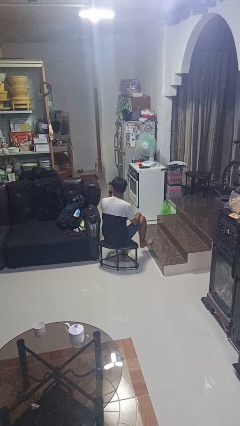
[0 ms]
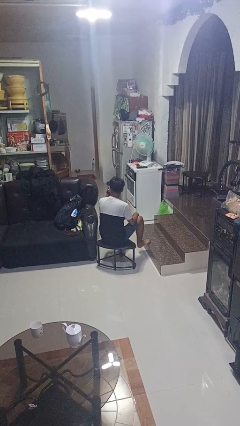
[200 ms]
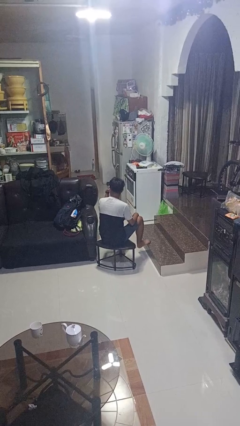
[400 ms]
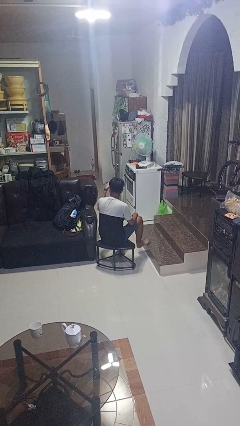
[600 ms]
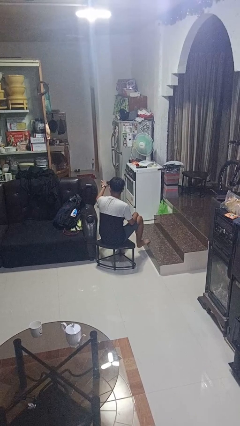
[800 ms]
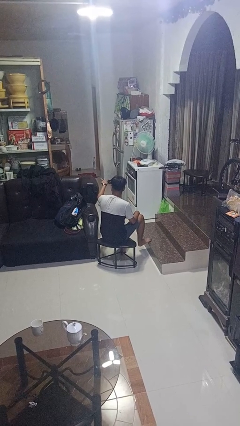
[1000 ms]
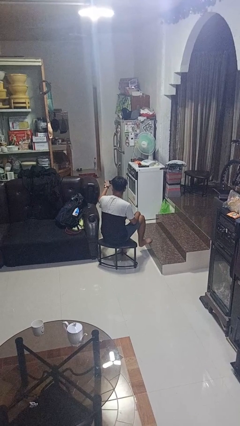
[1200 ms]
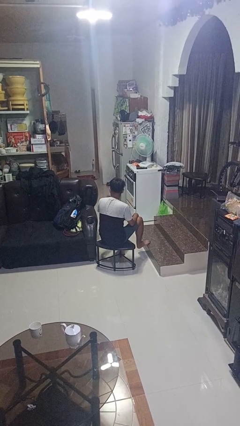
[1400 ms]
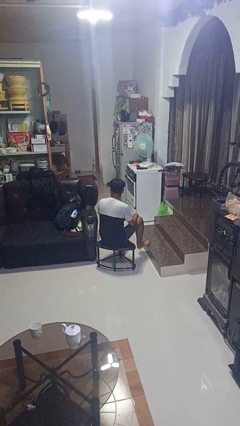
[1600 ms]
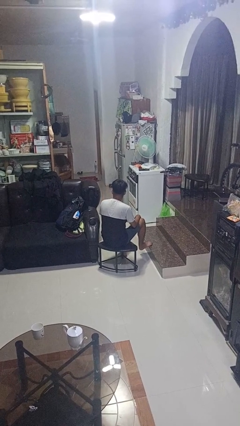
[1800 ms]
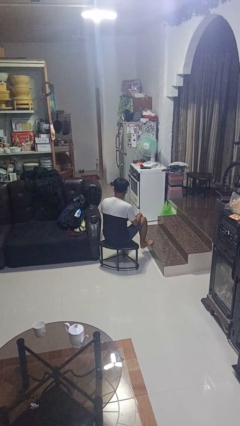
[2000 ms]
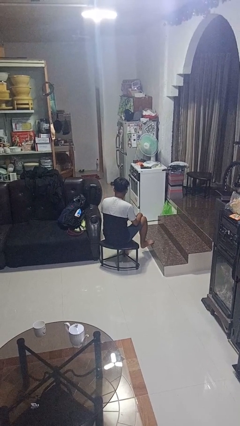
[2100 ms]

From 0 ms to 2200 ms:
person gestures watch closely

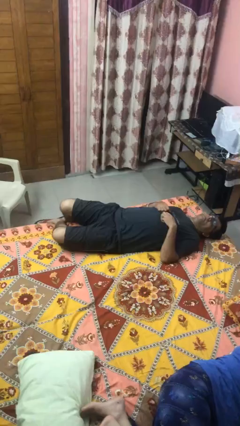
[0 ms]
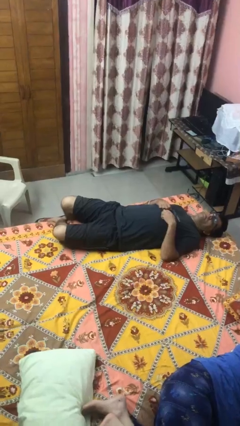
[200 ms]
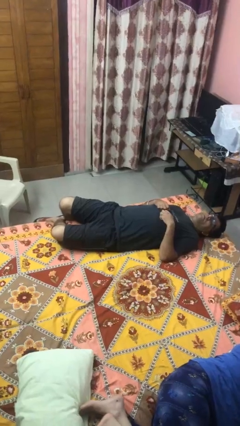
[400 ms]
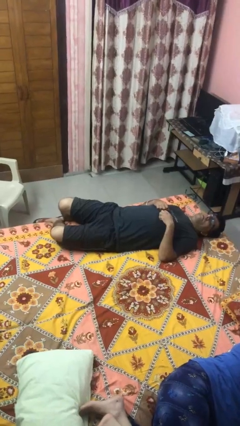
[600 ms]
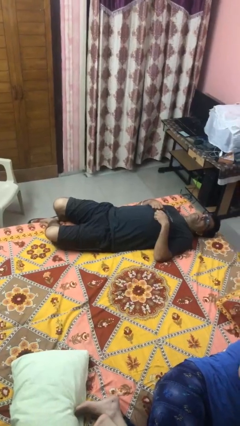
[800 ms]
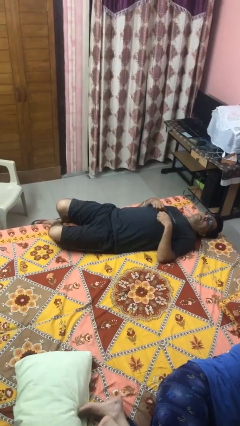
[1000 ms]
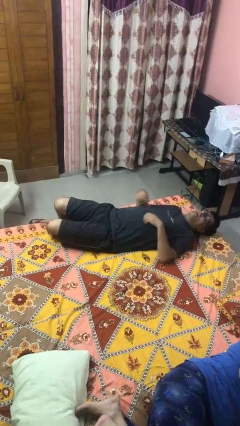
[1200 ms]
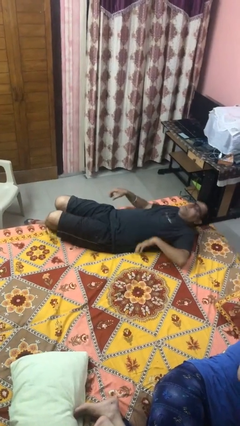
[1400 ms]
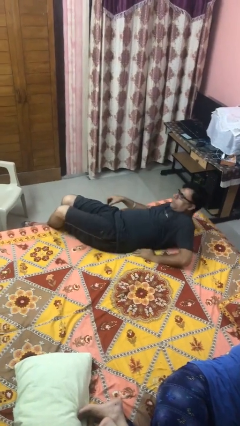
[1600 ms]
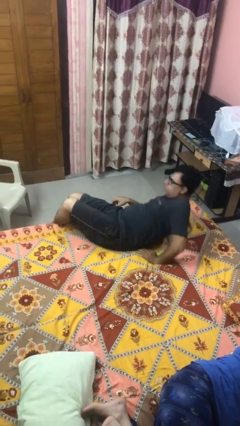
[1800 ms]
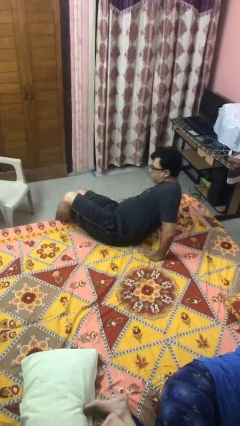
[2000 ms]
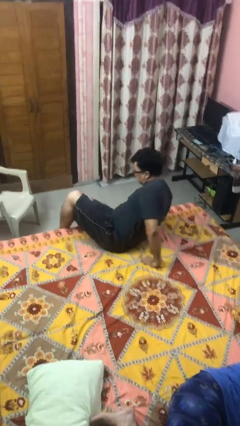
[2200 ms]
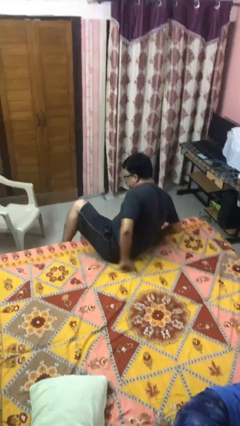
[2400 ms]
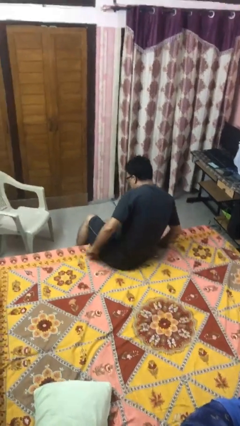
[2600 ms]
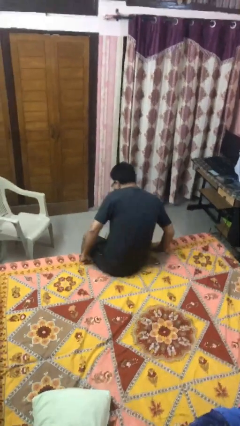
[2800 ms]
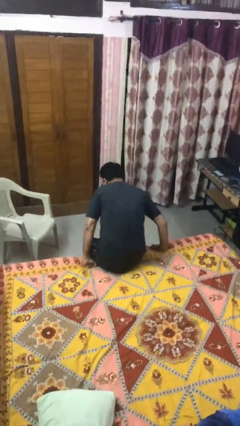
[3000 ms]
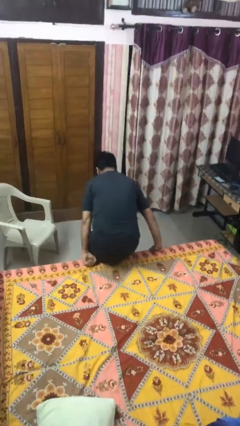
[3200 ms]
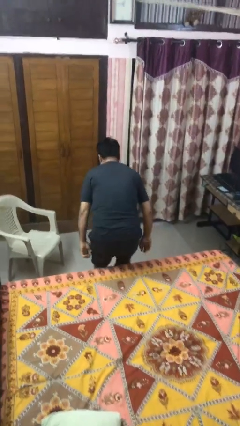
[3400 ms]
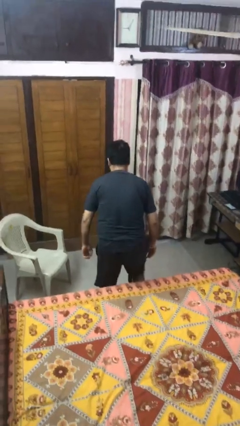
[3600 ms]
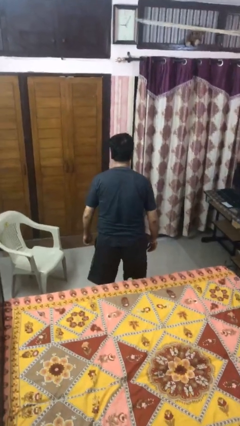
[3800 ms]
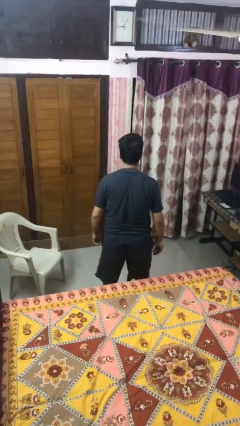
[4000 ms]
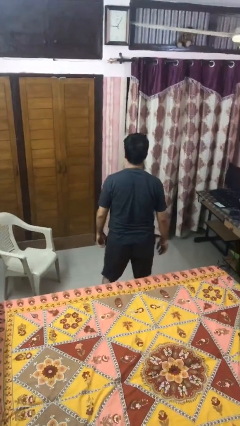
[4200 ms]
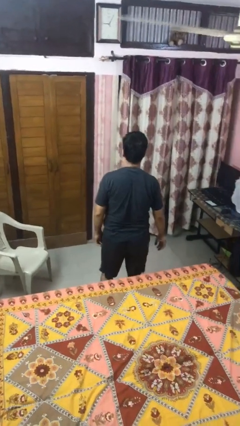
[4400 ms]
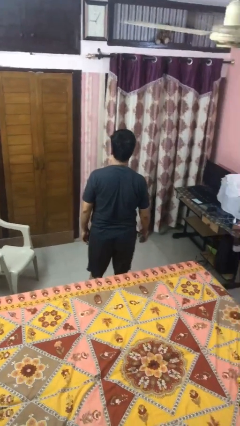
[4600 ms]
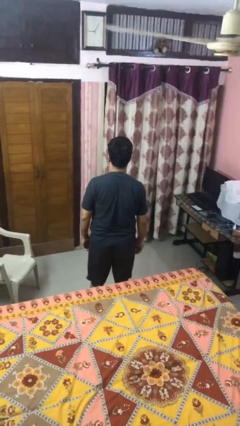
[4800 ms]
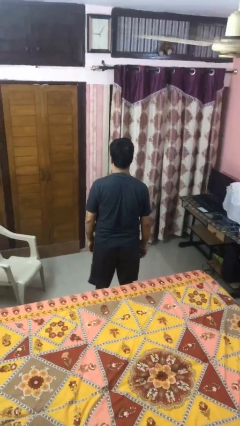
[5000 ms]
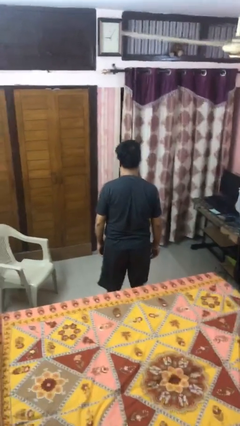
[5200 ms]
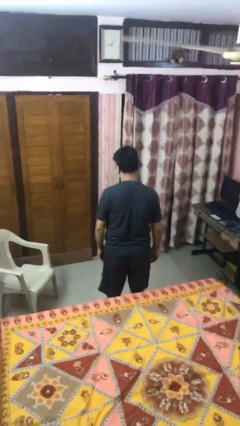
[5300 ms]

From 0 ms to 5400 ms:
person stands up

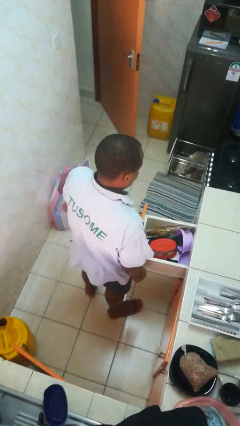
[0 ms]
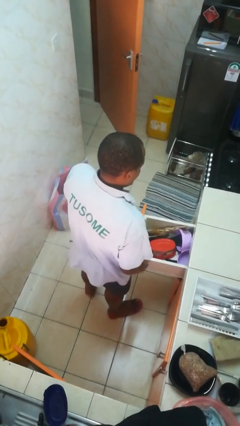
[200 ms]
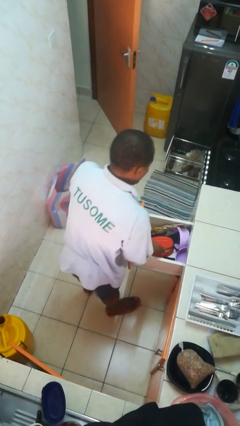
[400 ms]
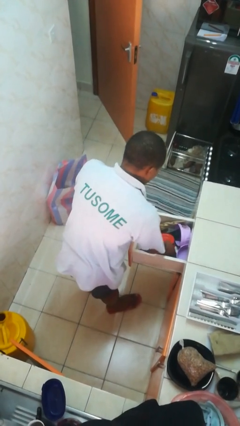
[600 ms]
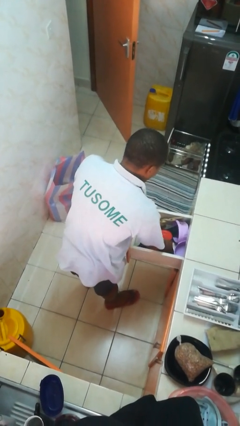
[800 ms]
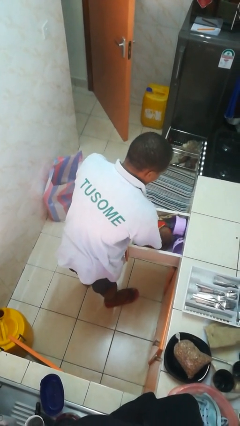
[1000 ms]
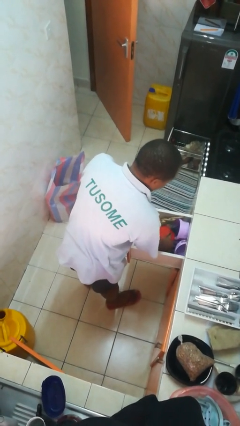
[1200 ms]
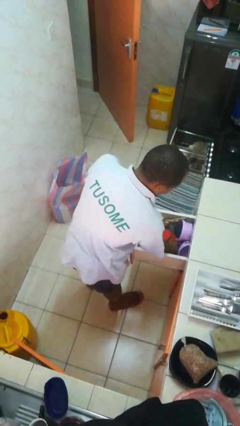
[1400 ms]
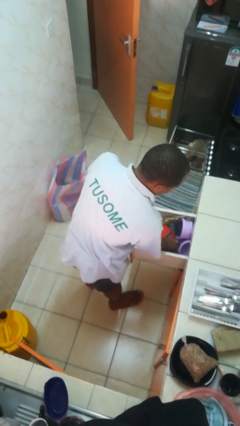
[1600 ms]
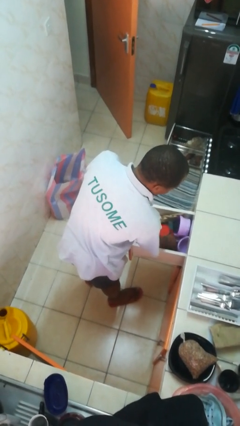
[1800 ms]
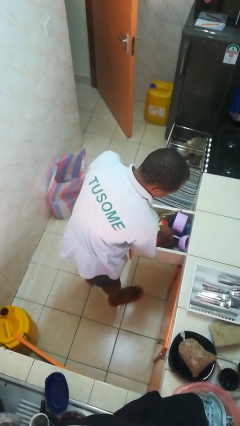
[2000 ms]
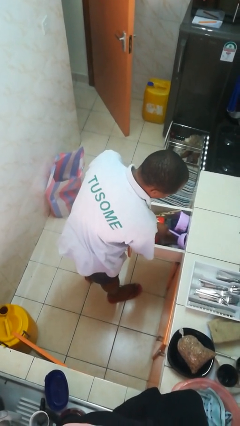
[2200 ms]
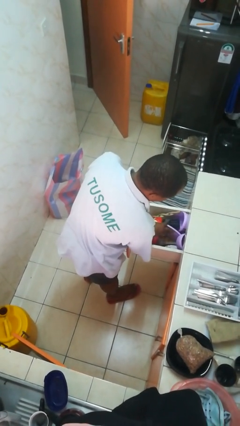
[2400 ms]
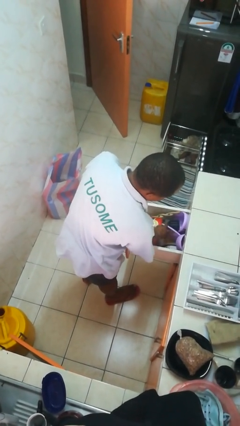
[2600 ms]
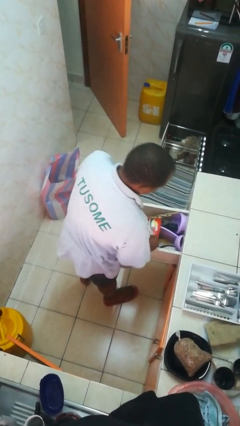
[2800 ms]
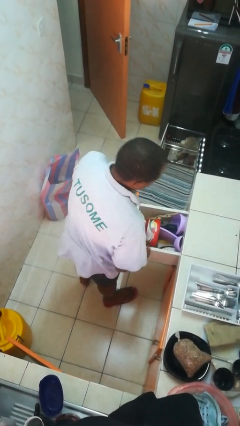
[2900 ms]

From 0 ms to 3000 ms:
person searches in kitchen drawer

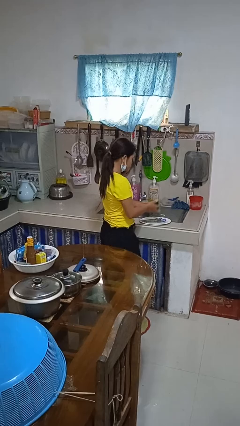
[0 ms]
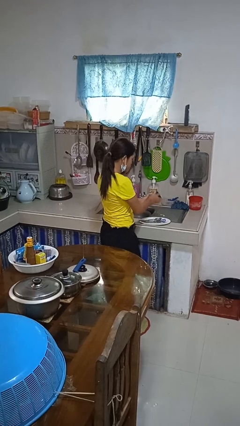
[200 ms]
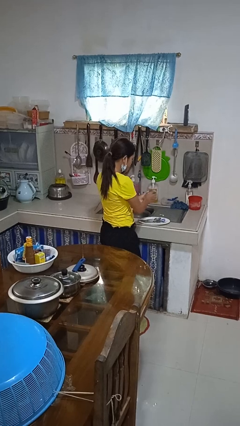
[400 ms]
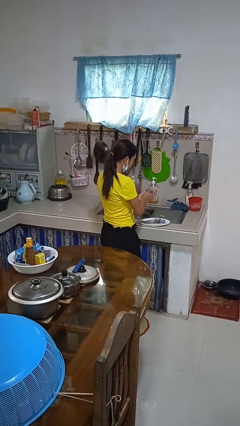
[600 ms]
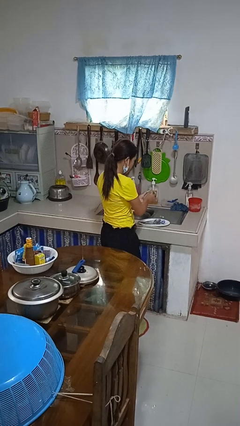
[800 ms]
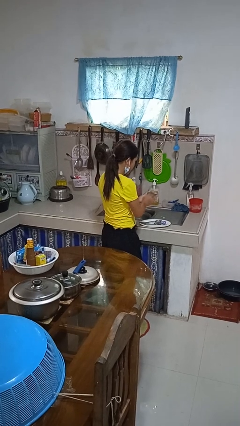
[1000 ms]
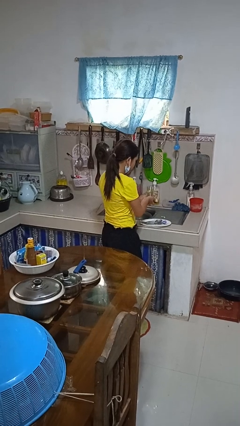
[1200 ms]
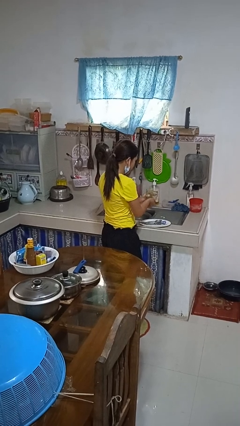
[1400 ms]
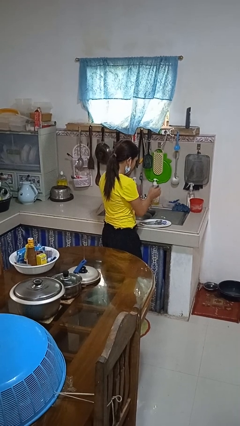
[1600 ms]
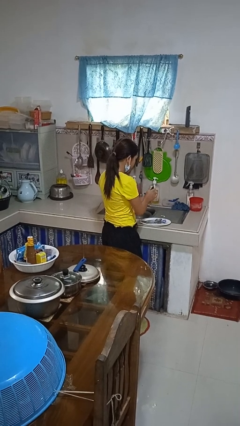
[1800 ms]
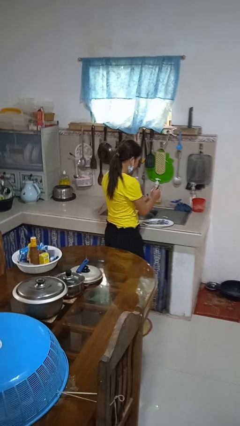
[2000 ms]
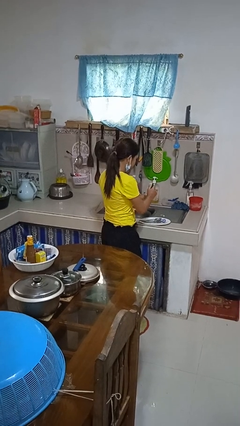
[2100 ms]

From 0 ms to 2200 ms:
person washes dish

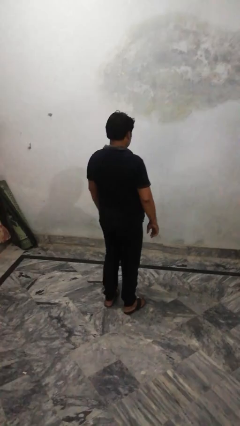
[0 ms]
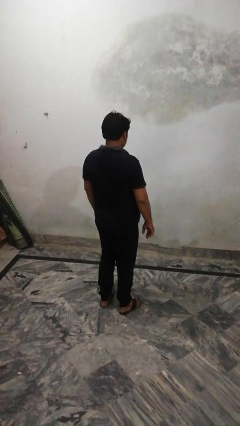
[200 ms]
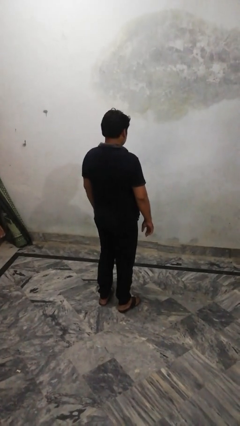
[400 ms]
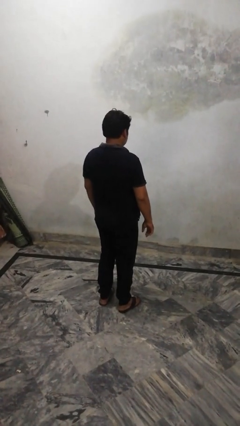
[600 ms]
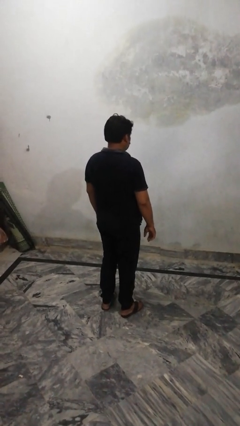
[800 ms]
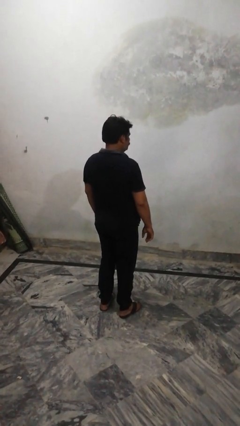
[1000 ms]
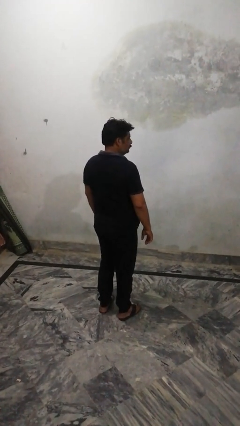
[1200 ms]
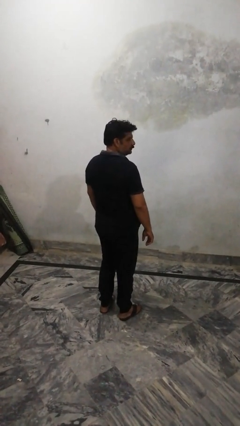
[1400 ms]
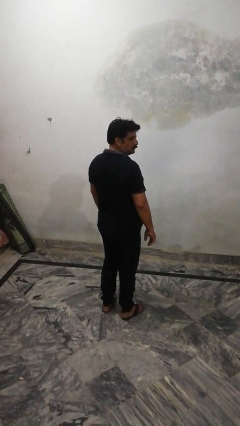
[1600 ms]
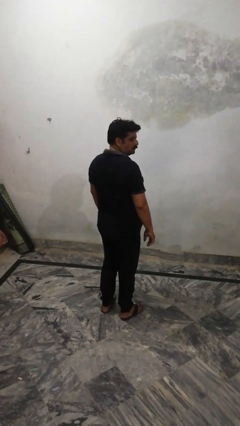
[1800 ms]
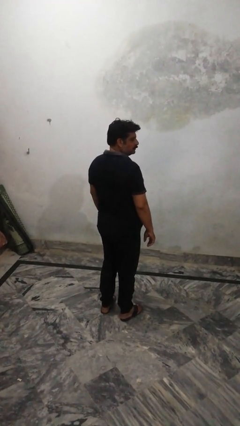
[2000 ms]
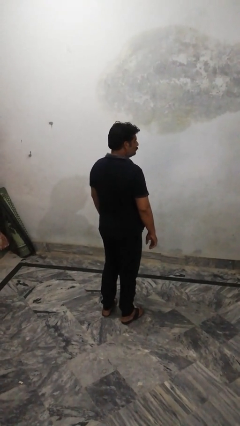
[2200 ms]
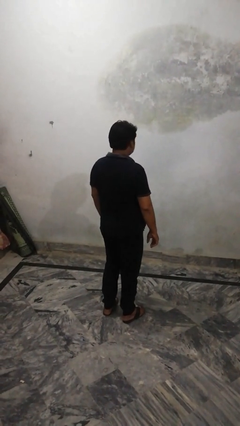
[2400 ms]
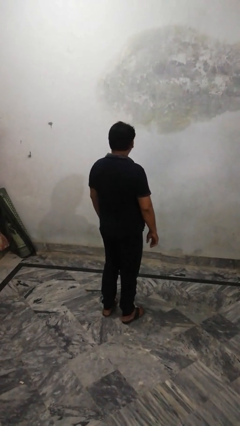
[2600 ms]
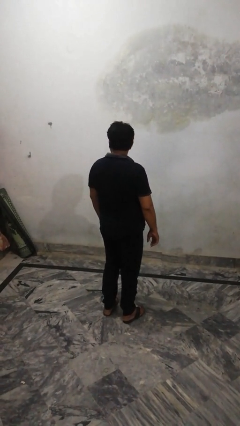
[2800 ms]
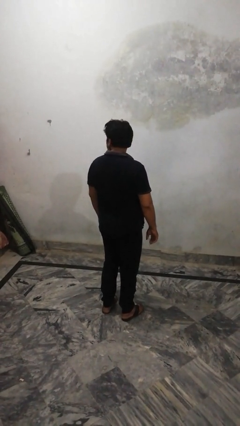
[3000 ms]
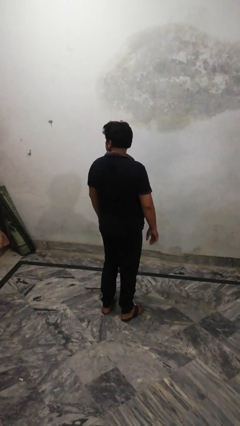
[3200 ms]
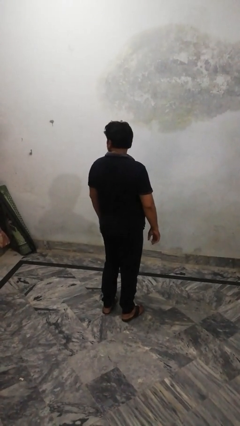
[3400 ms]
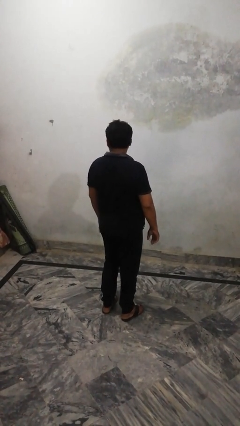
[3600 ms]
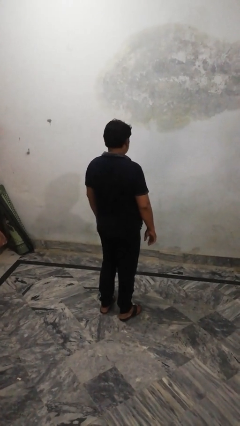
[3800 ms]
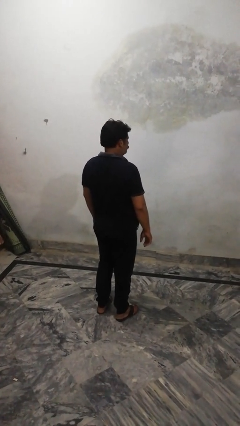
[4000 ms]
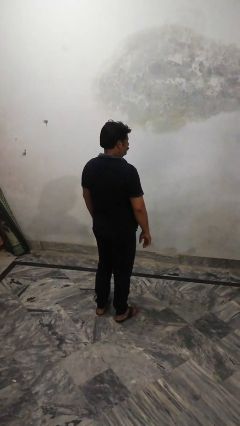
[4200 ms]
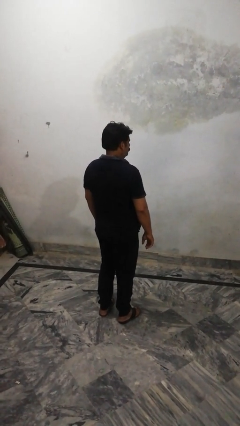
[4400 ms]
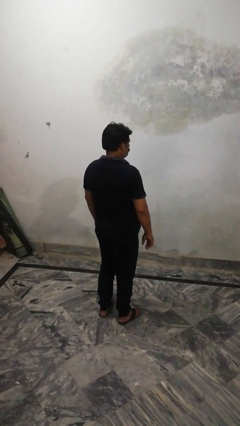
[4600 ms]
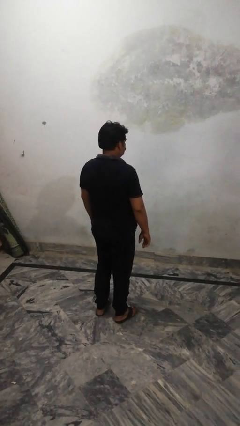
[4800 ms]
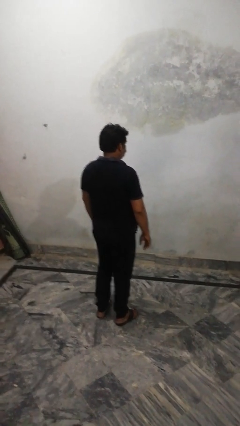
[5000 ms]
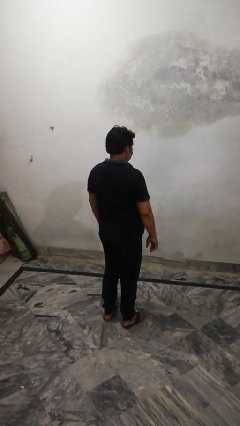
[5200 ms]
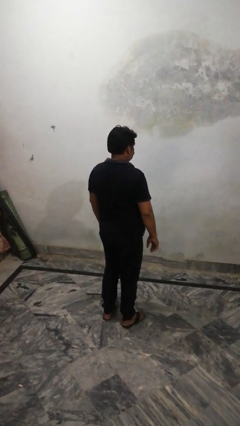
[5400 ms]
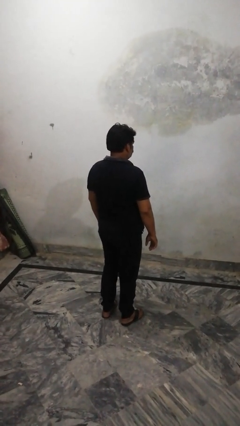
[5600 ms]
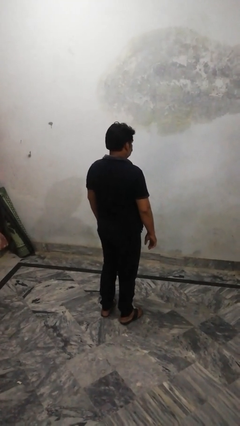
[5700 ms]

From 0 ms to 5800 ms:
person shakes head
